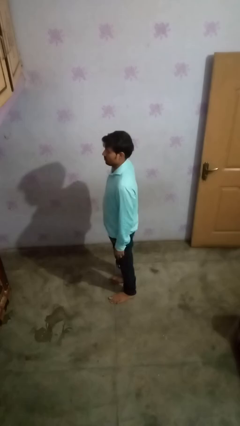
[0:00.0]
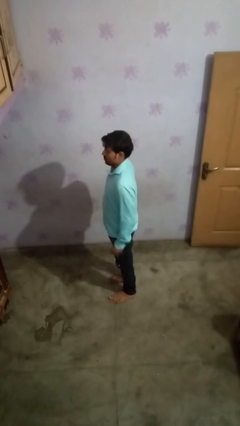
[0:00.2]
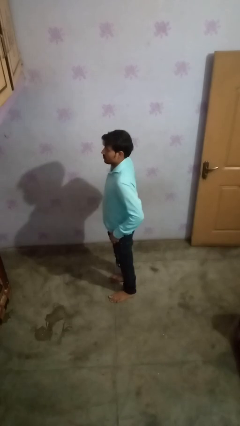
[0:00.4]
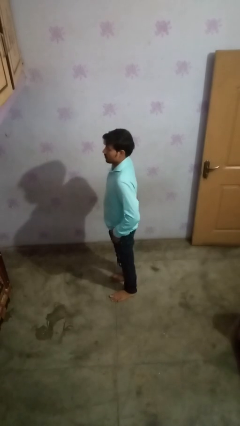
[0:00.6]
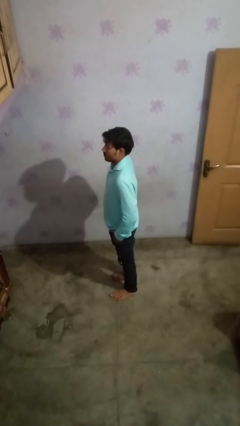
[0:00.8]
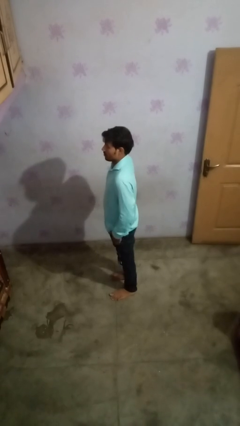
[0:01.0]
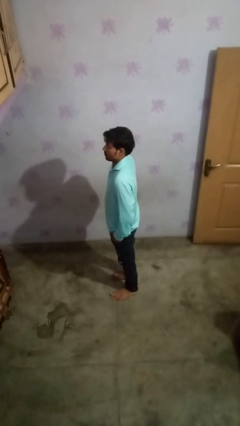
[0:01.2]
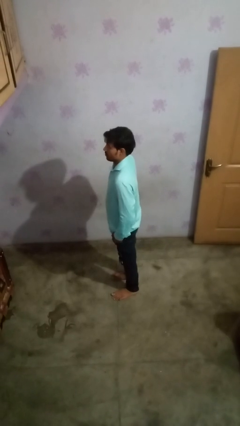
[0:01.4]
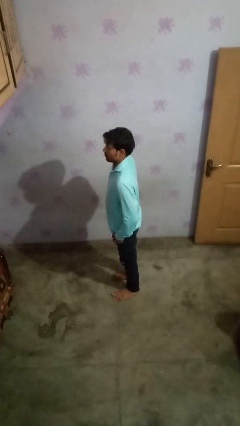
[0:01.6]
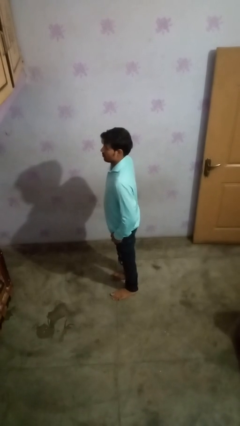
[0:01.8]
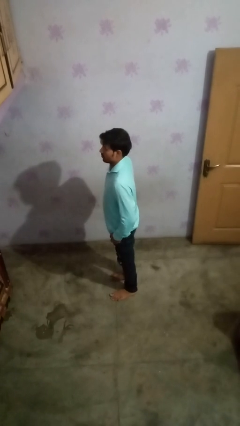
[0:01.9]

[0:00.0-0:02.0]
person puts hands in back pockets

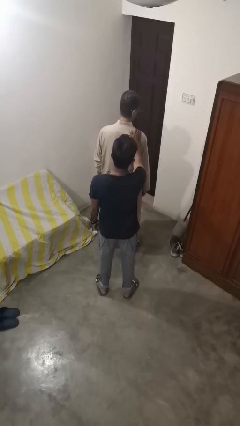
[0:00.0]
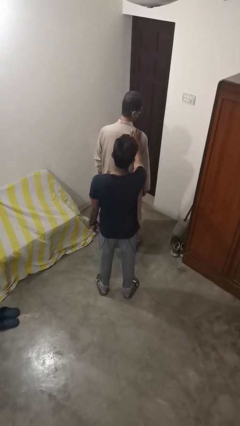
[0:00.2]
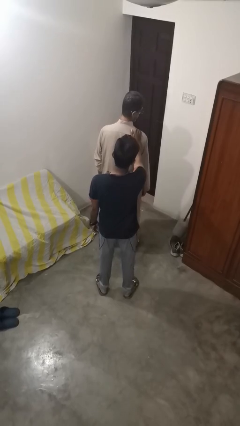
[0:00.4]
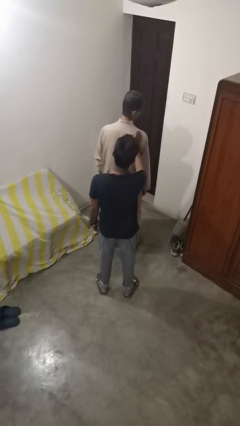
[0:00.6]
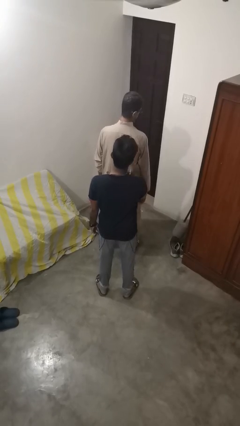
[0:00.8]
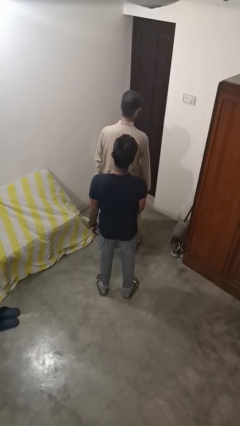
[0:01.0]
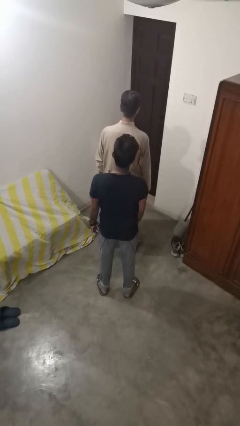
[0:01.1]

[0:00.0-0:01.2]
person spins person around

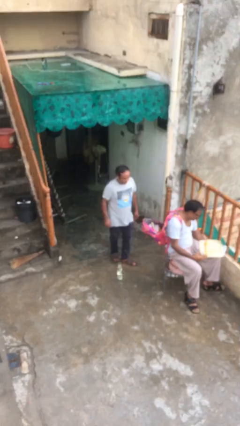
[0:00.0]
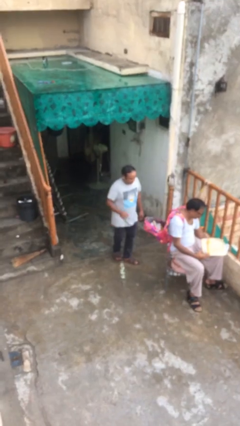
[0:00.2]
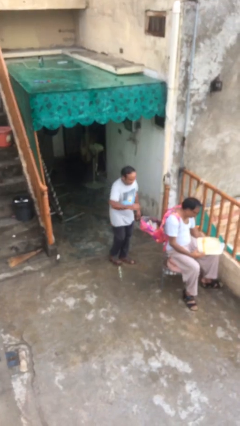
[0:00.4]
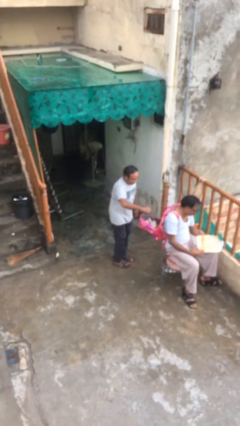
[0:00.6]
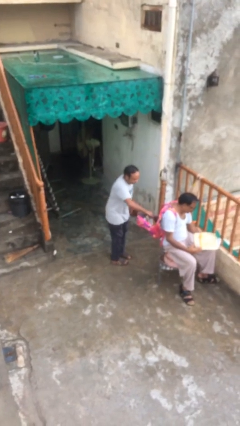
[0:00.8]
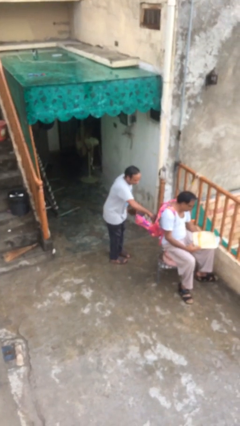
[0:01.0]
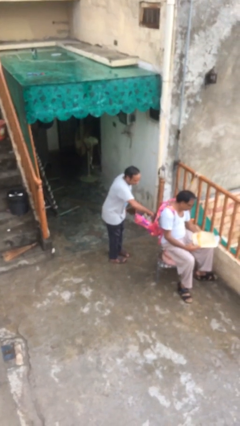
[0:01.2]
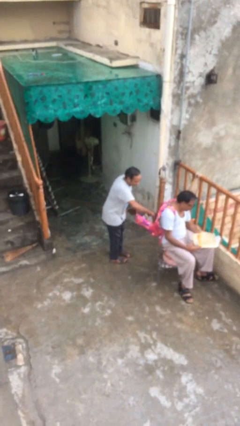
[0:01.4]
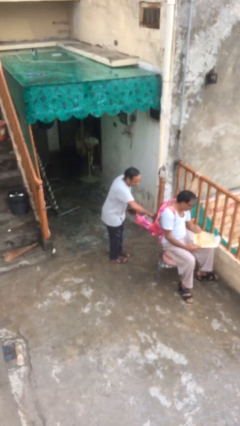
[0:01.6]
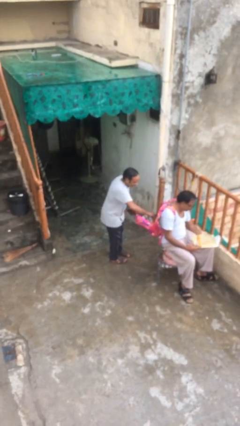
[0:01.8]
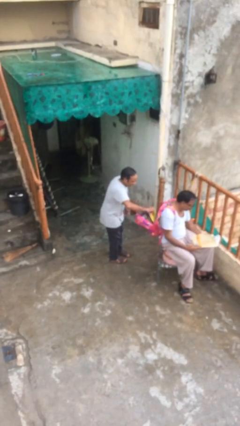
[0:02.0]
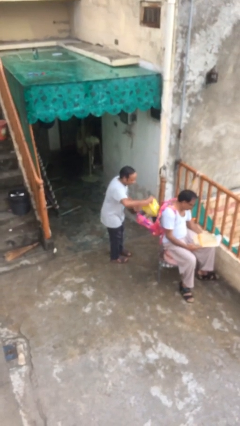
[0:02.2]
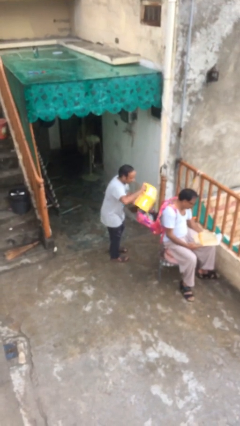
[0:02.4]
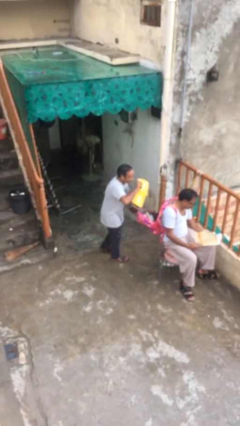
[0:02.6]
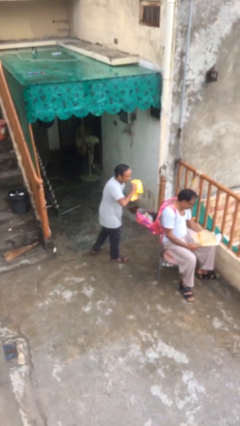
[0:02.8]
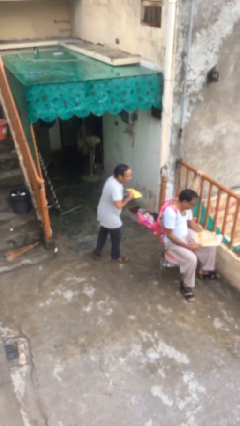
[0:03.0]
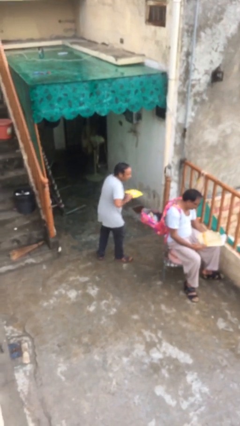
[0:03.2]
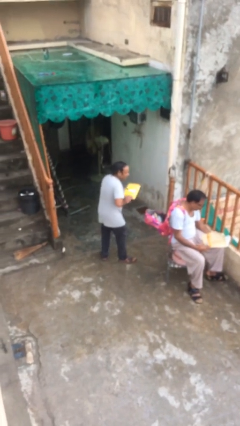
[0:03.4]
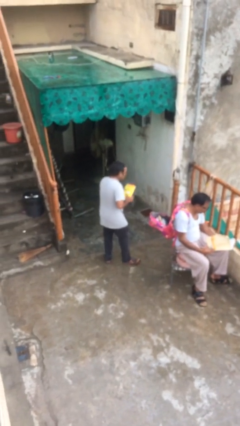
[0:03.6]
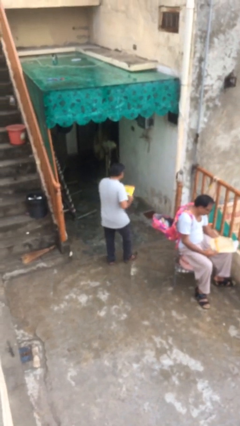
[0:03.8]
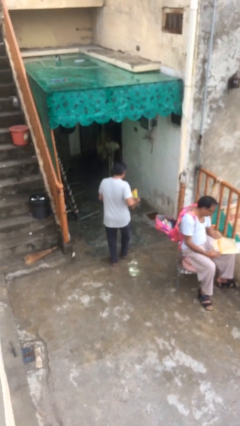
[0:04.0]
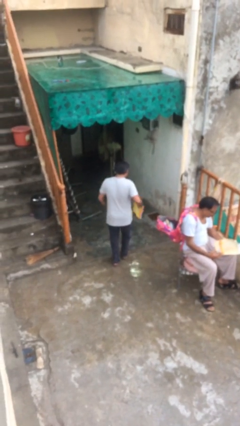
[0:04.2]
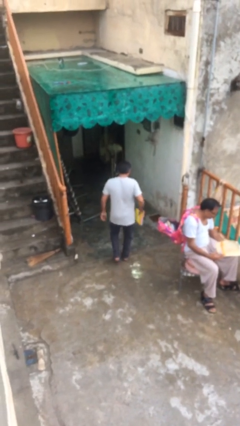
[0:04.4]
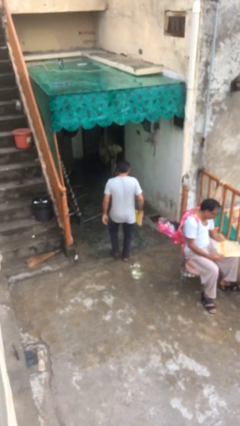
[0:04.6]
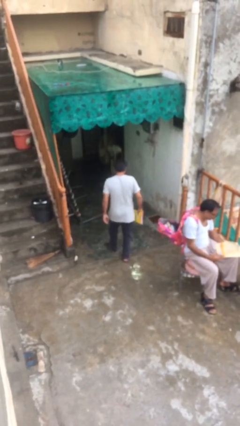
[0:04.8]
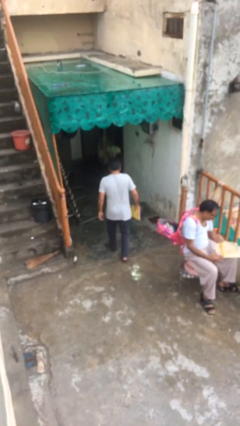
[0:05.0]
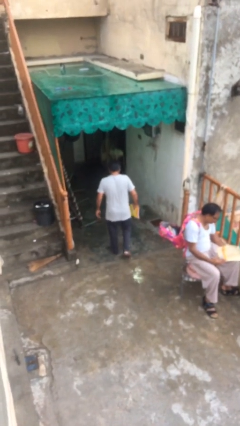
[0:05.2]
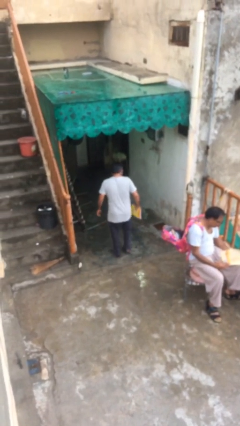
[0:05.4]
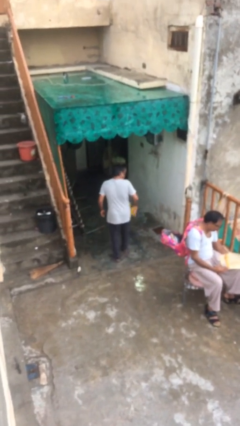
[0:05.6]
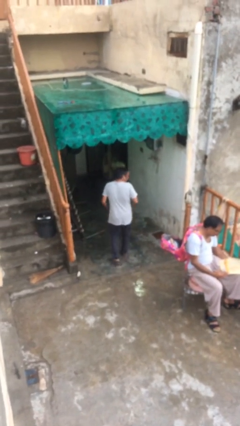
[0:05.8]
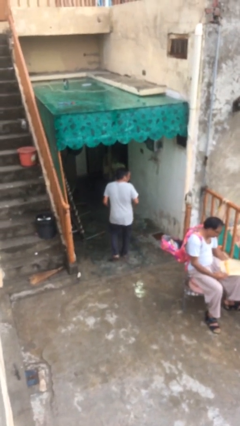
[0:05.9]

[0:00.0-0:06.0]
person steals object from person

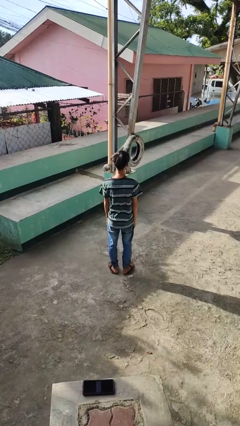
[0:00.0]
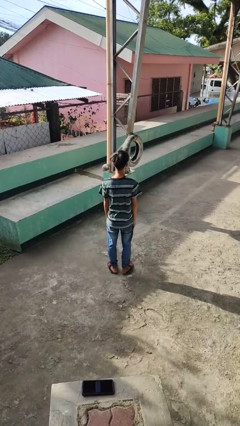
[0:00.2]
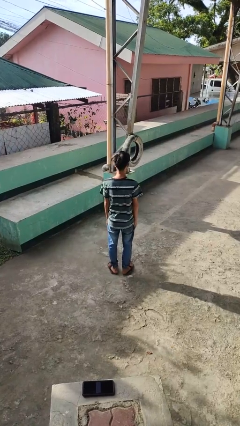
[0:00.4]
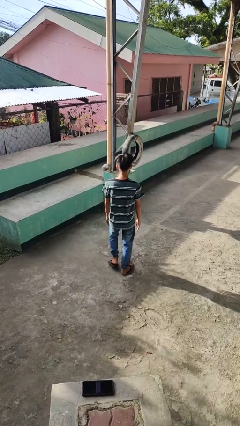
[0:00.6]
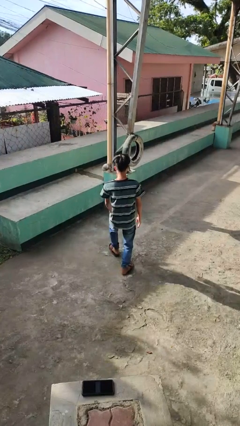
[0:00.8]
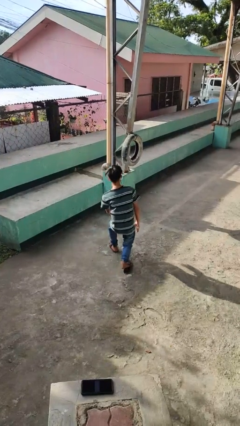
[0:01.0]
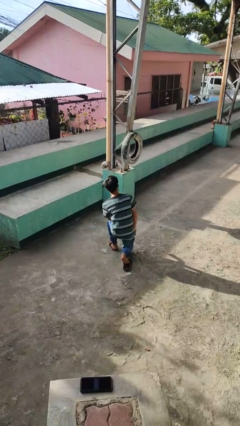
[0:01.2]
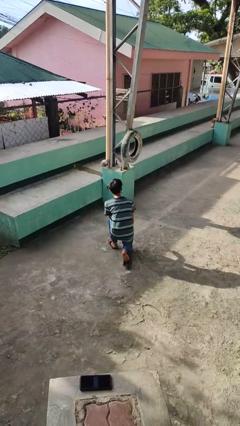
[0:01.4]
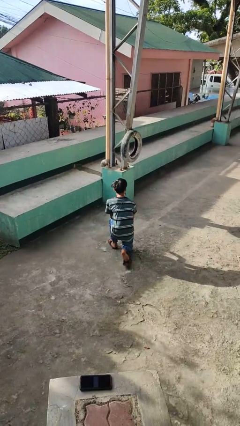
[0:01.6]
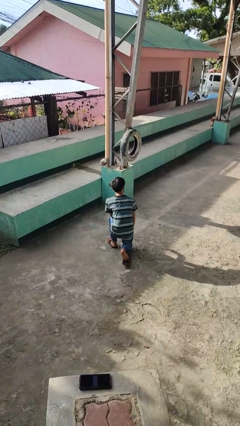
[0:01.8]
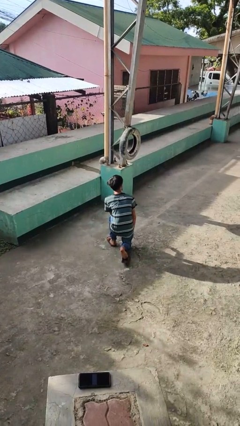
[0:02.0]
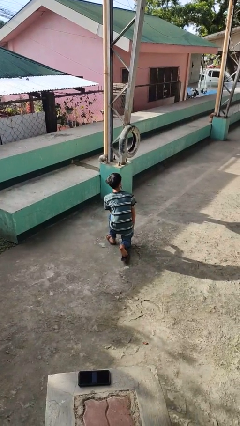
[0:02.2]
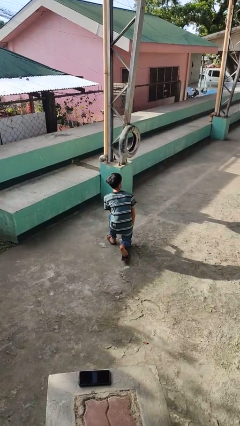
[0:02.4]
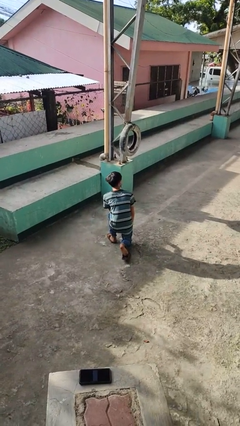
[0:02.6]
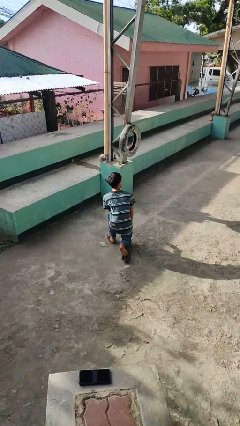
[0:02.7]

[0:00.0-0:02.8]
person kneels

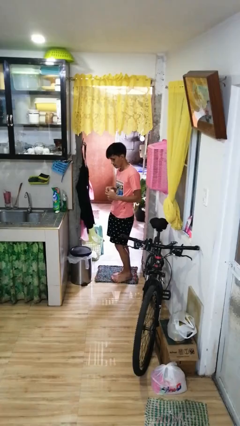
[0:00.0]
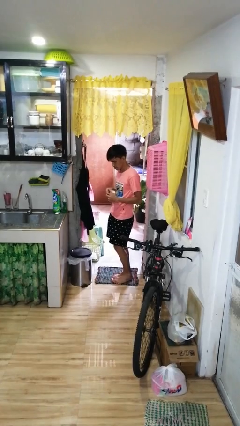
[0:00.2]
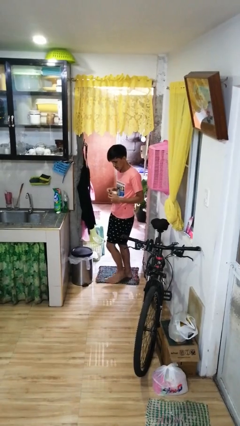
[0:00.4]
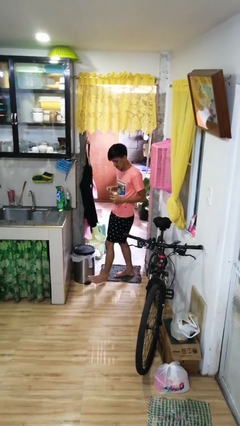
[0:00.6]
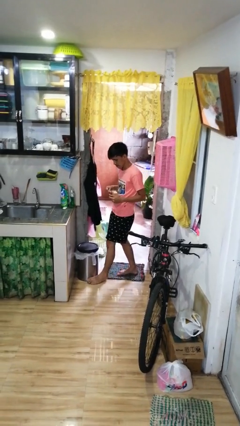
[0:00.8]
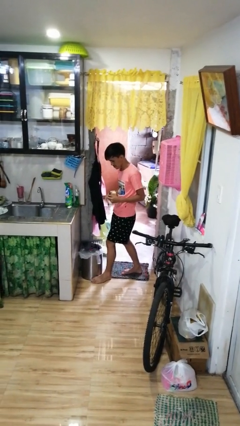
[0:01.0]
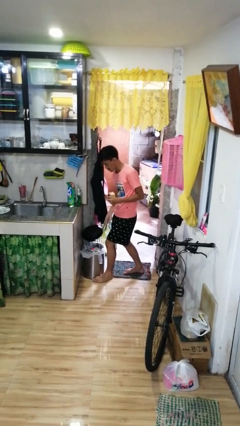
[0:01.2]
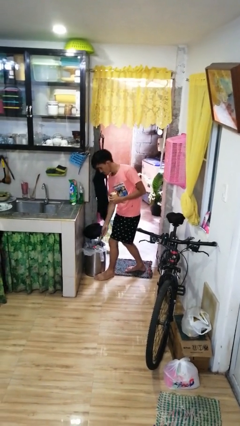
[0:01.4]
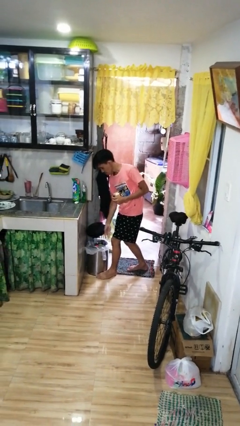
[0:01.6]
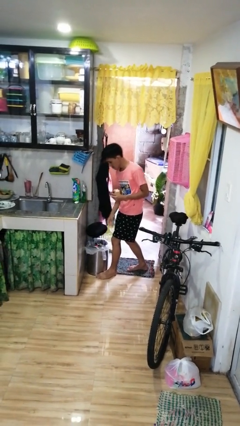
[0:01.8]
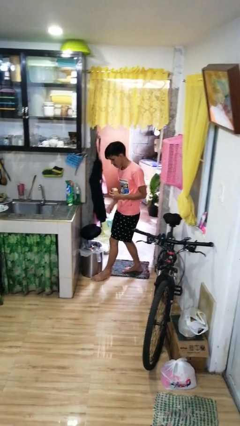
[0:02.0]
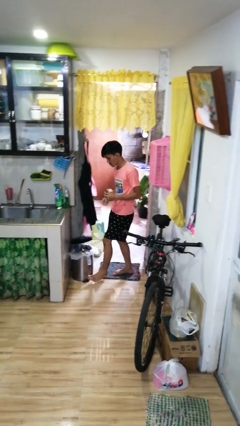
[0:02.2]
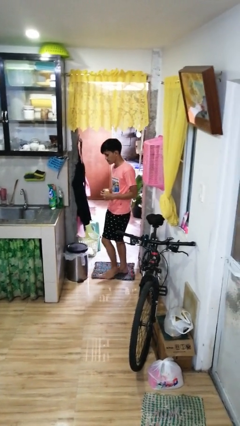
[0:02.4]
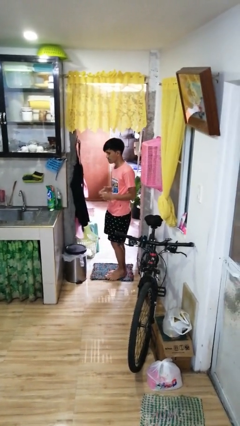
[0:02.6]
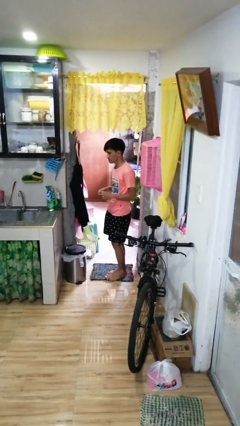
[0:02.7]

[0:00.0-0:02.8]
person discards trash

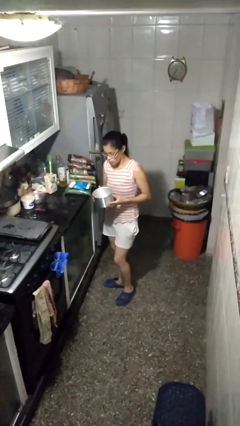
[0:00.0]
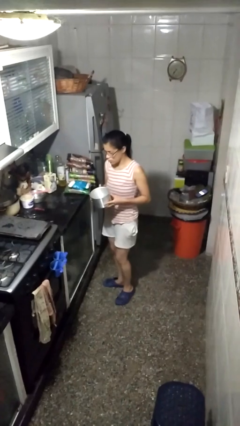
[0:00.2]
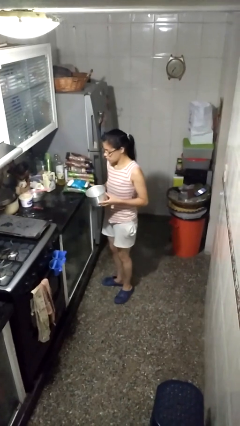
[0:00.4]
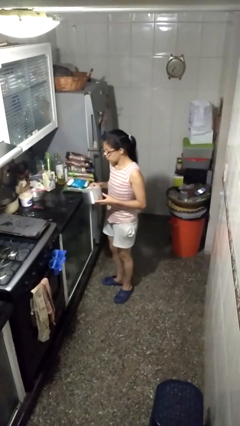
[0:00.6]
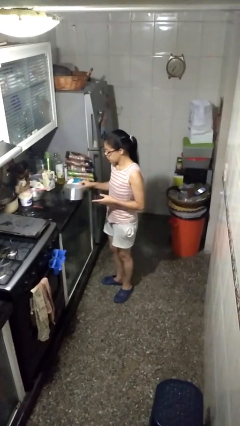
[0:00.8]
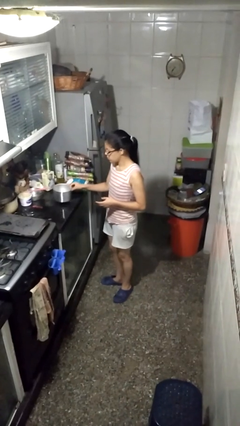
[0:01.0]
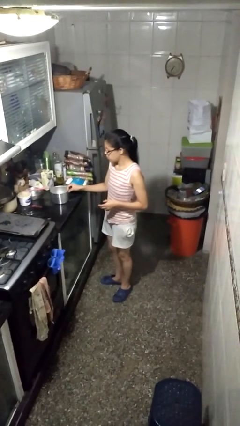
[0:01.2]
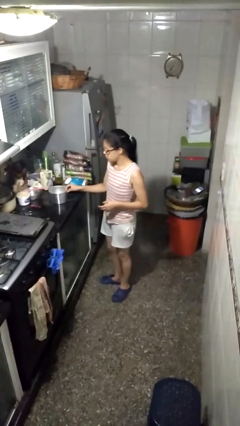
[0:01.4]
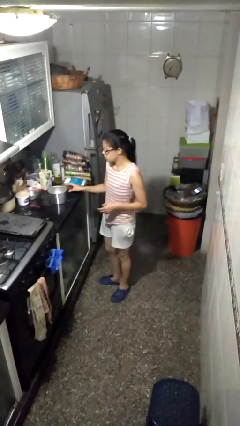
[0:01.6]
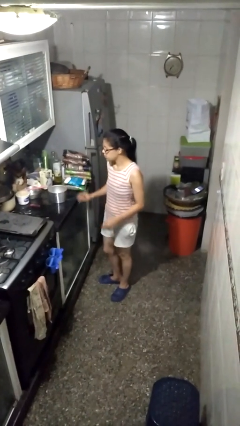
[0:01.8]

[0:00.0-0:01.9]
person puts down object on countertop

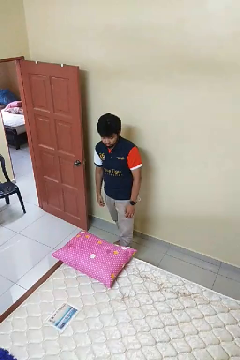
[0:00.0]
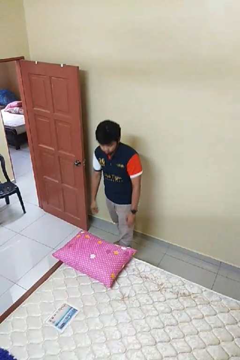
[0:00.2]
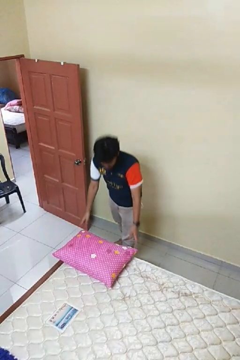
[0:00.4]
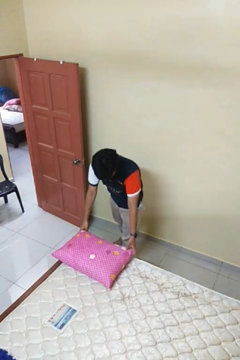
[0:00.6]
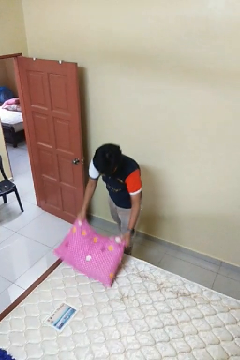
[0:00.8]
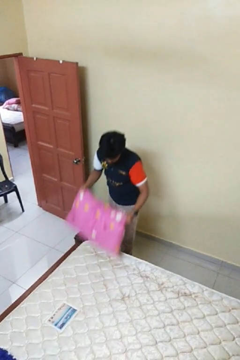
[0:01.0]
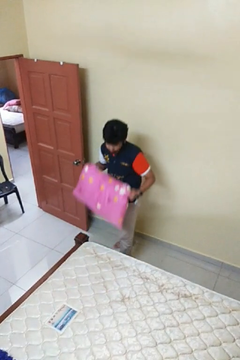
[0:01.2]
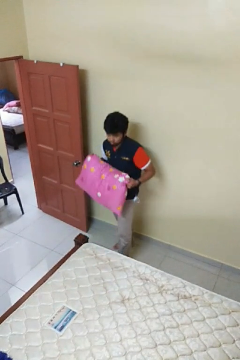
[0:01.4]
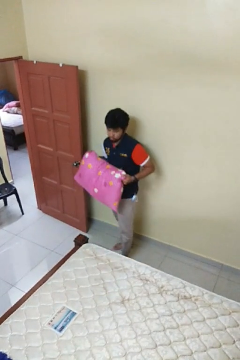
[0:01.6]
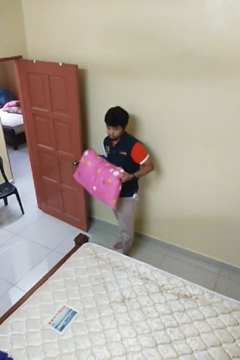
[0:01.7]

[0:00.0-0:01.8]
person picks up object from bed
